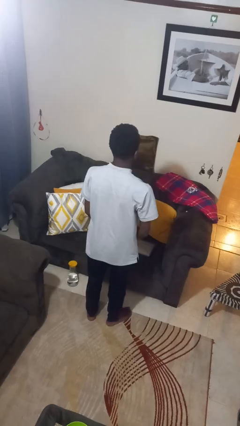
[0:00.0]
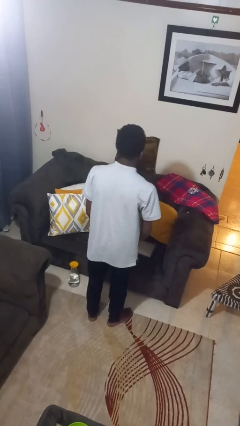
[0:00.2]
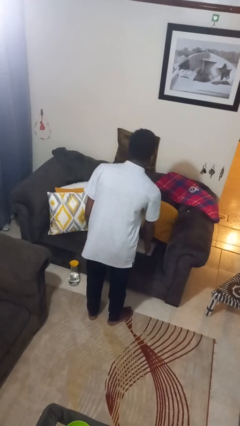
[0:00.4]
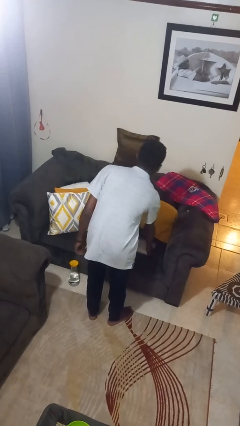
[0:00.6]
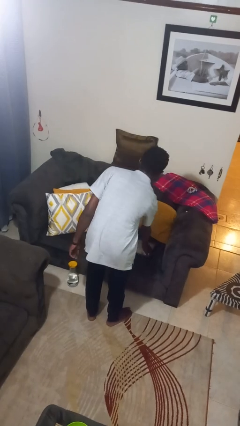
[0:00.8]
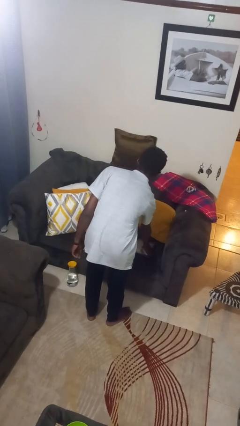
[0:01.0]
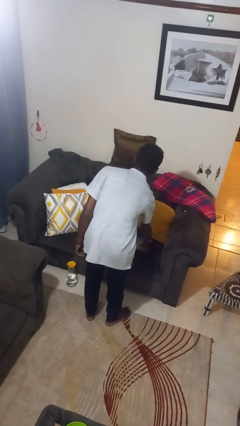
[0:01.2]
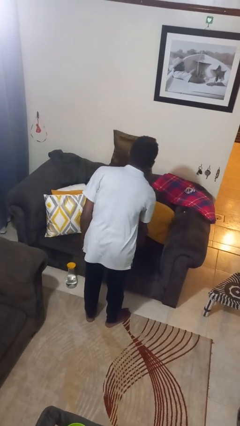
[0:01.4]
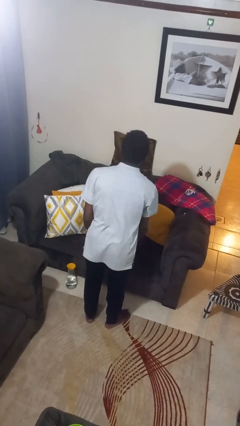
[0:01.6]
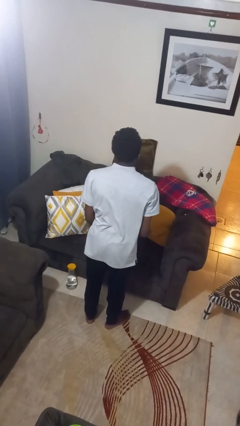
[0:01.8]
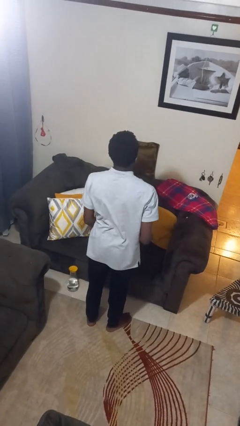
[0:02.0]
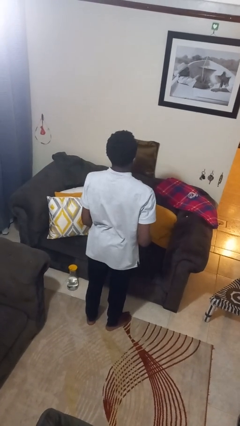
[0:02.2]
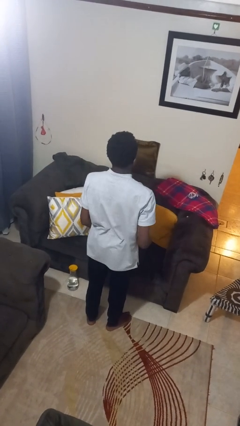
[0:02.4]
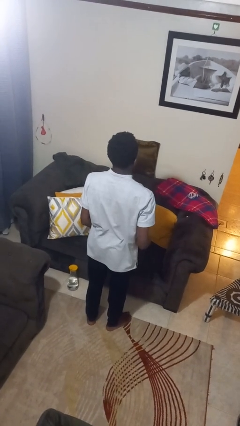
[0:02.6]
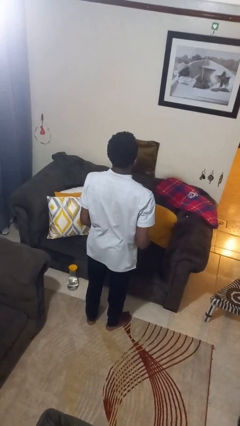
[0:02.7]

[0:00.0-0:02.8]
person picks up object from couch

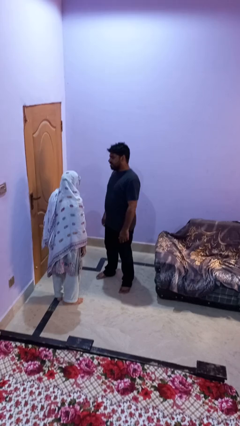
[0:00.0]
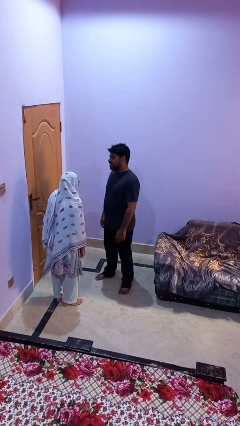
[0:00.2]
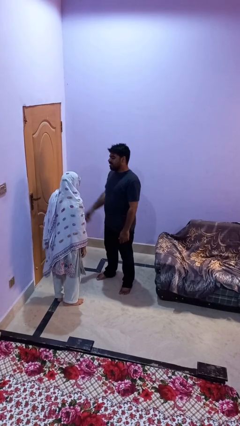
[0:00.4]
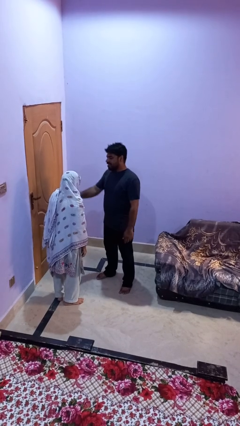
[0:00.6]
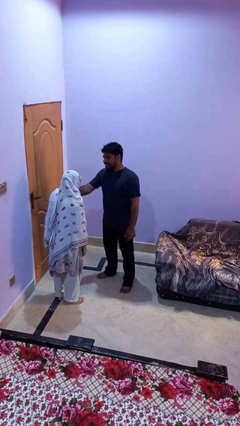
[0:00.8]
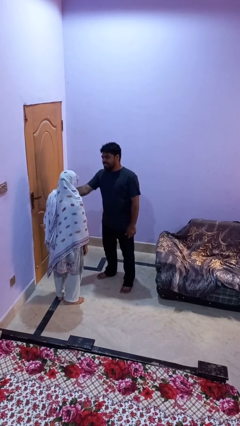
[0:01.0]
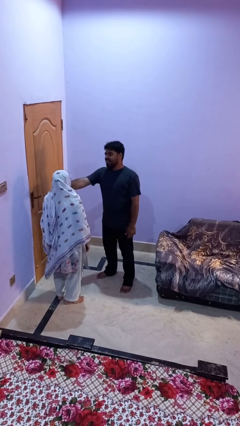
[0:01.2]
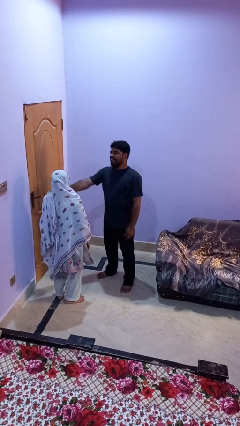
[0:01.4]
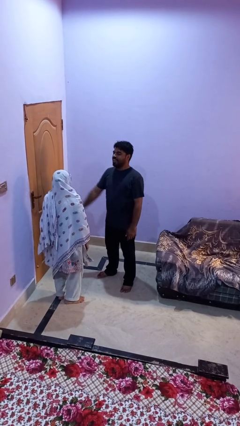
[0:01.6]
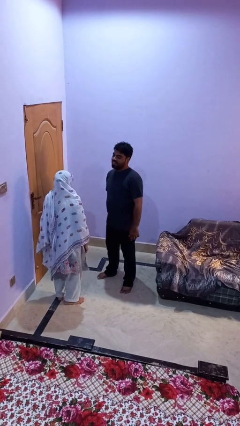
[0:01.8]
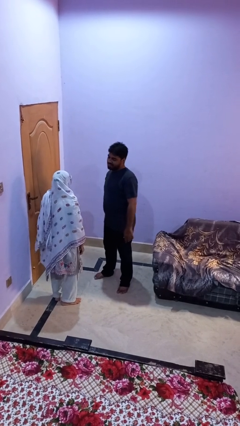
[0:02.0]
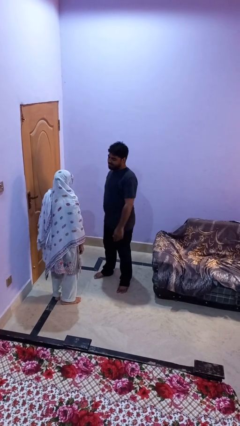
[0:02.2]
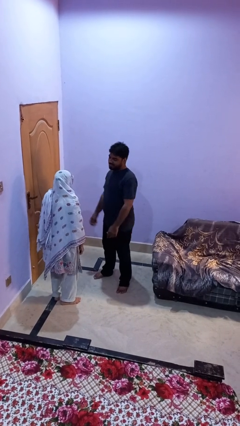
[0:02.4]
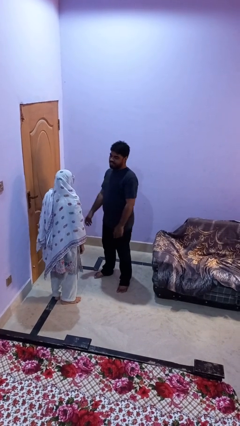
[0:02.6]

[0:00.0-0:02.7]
person shoves person

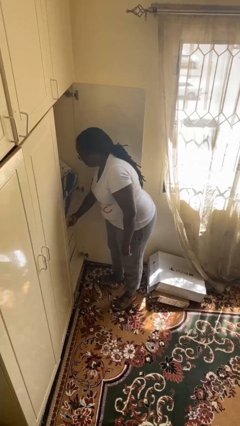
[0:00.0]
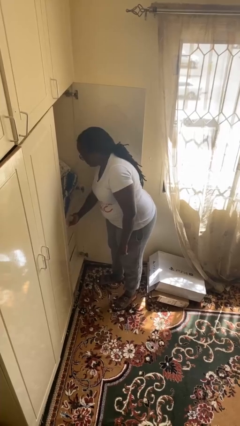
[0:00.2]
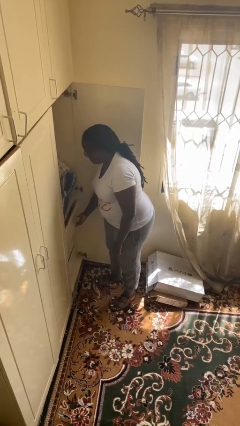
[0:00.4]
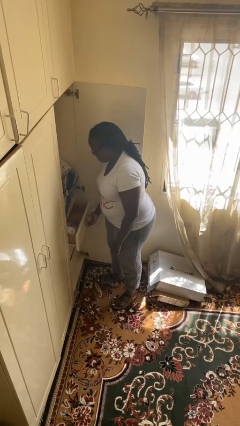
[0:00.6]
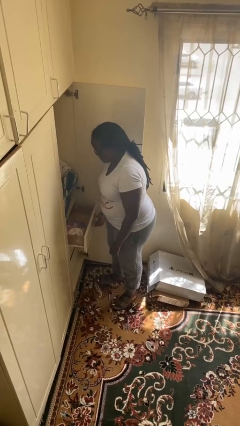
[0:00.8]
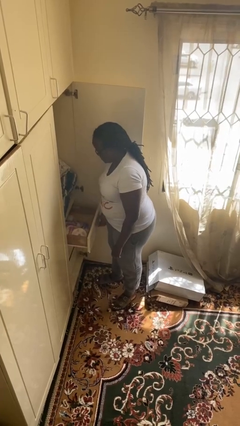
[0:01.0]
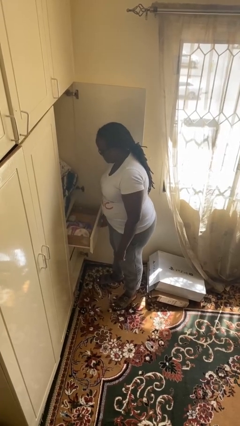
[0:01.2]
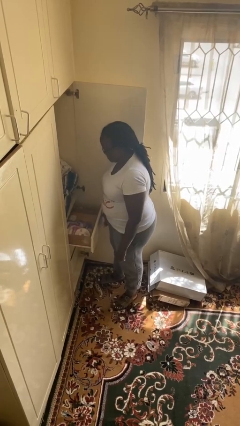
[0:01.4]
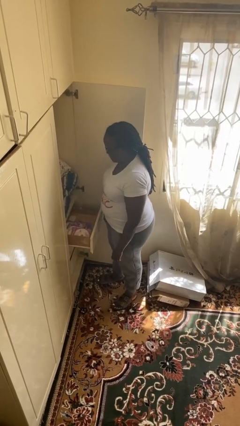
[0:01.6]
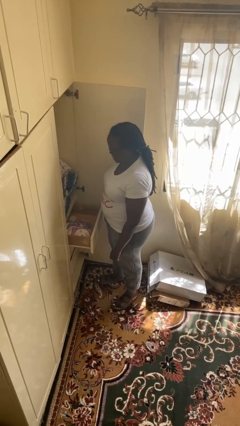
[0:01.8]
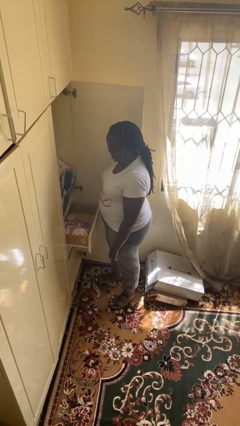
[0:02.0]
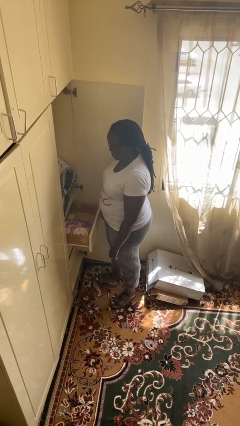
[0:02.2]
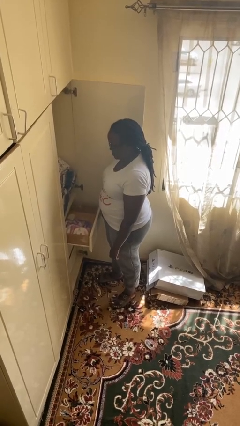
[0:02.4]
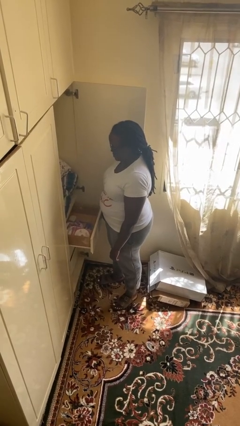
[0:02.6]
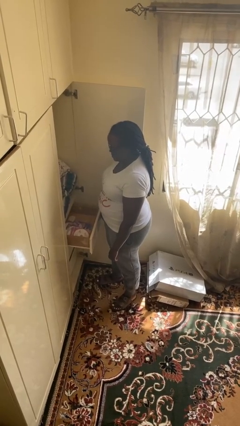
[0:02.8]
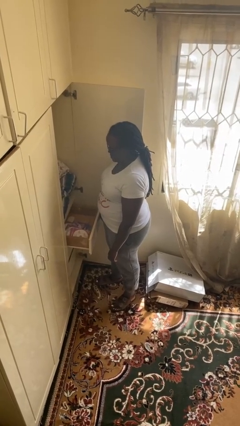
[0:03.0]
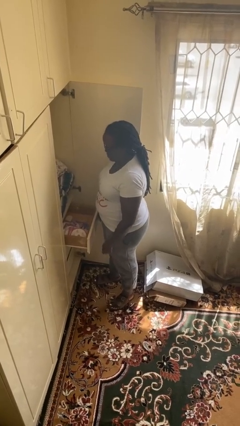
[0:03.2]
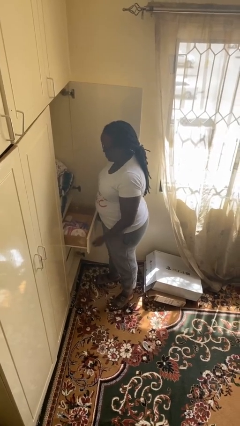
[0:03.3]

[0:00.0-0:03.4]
person opens dresser drawer

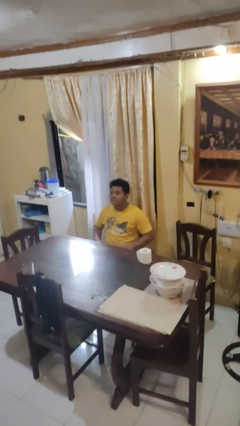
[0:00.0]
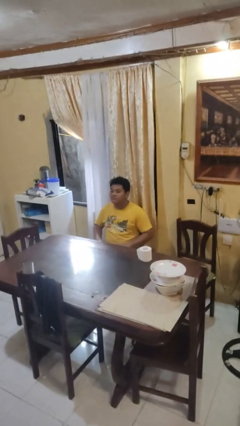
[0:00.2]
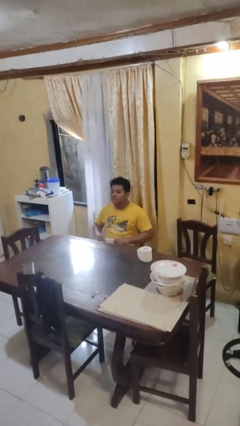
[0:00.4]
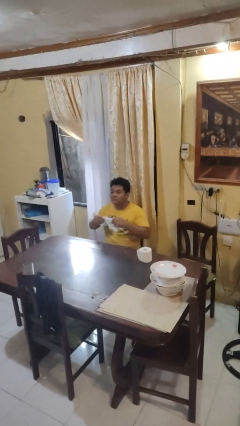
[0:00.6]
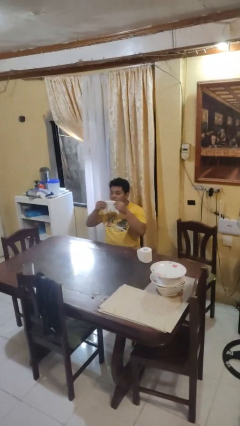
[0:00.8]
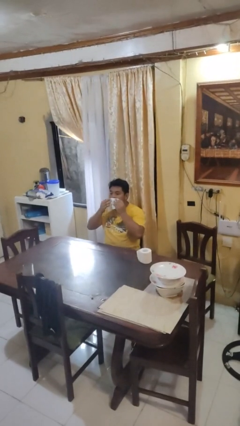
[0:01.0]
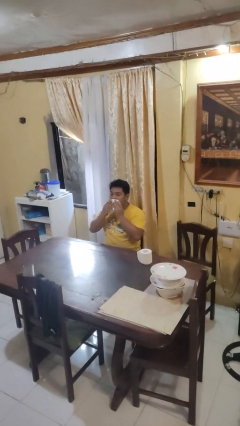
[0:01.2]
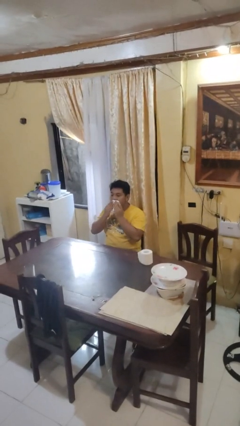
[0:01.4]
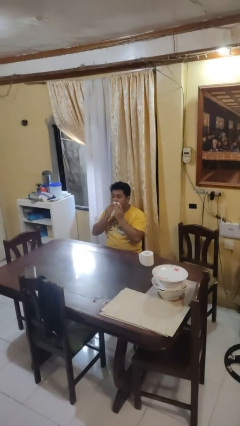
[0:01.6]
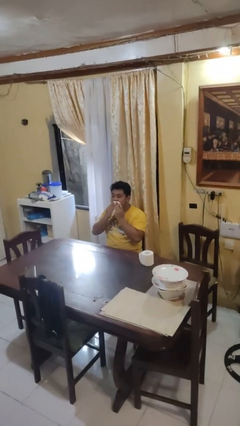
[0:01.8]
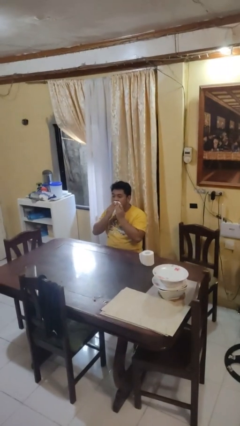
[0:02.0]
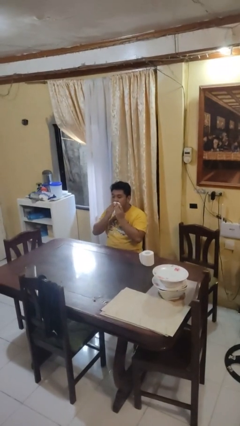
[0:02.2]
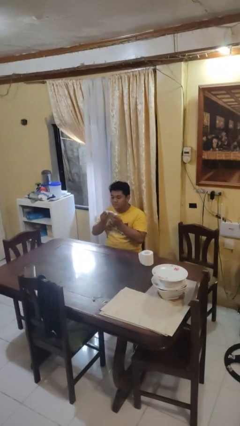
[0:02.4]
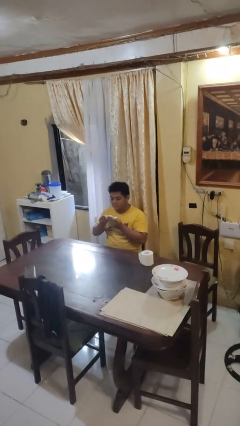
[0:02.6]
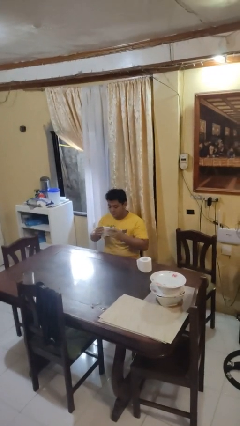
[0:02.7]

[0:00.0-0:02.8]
person wipes mouth with napkin

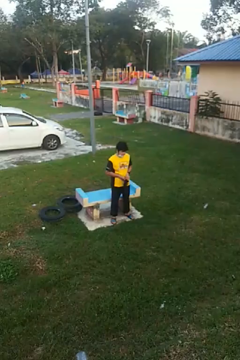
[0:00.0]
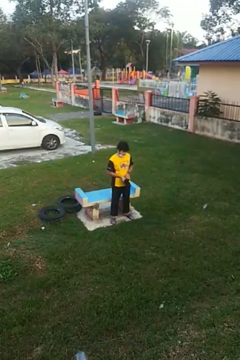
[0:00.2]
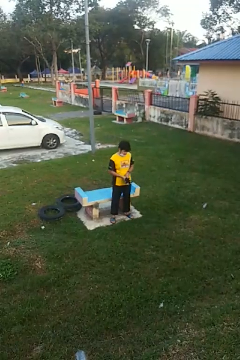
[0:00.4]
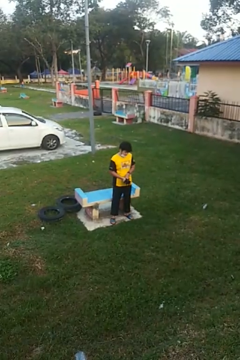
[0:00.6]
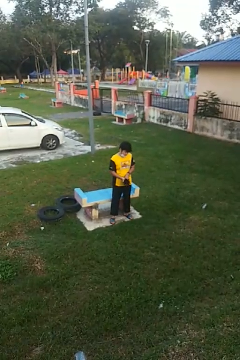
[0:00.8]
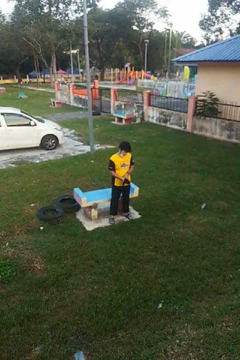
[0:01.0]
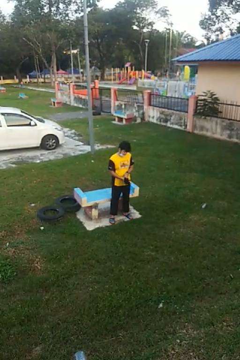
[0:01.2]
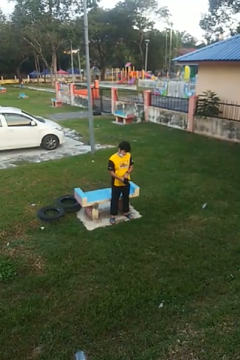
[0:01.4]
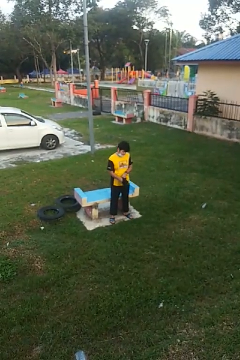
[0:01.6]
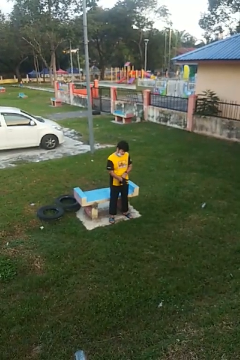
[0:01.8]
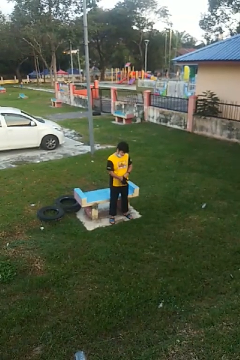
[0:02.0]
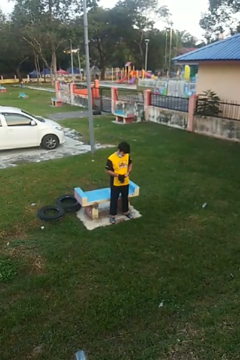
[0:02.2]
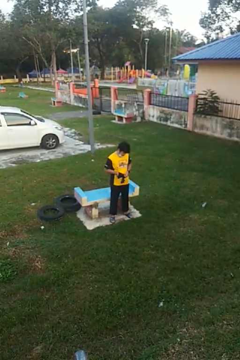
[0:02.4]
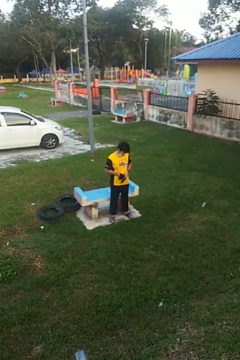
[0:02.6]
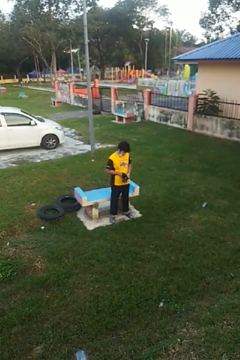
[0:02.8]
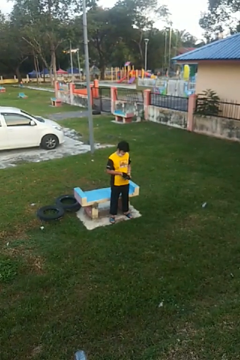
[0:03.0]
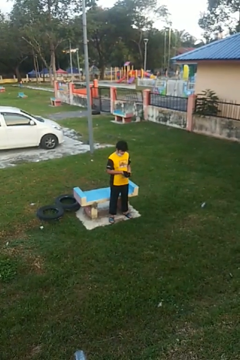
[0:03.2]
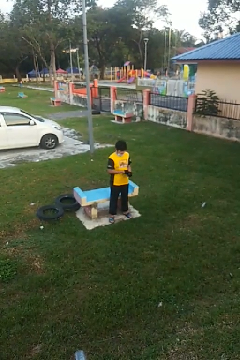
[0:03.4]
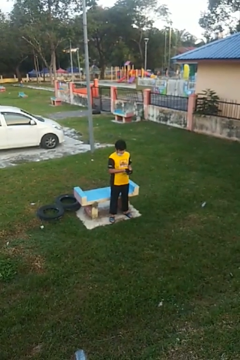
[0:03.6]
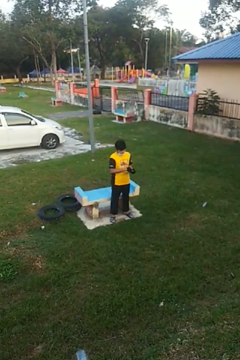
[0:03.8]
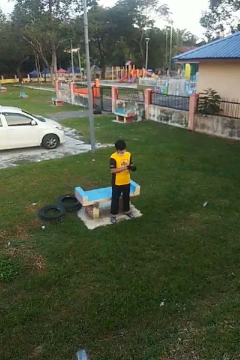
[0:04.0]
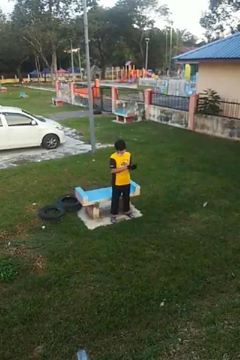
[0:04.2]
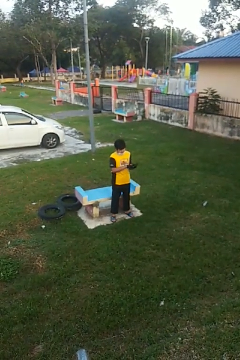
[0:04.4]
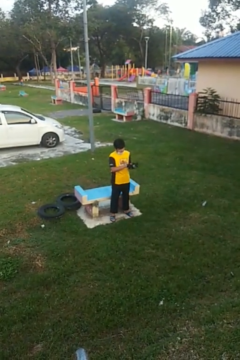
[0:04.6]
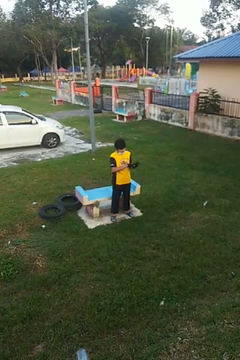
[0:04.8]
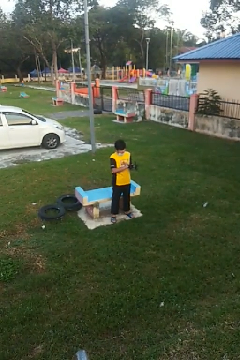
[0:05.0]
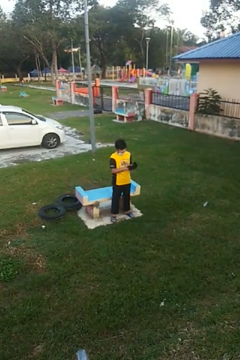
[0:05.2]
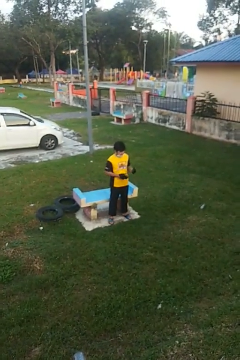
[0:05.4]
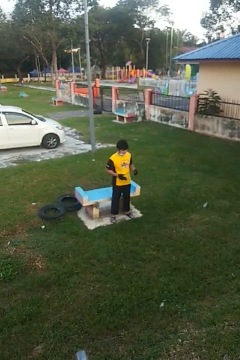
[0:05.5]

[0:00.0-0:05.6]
person puts on gloves

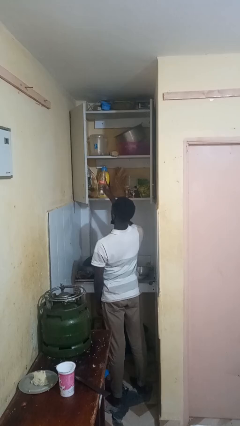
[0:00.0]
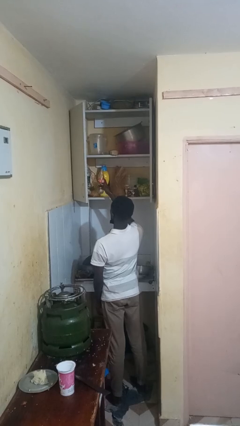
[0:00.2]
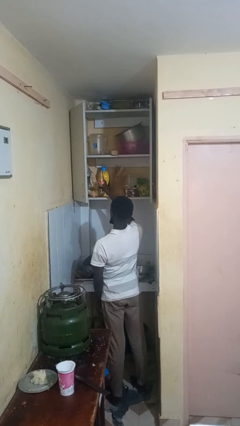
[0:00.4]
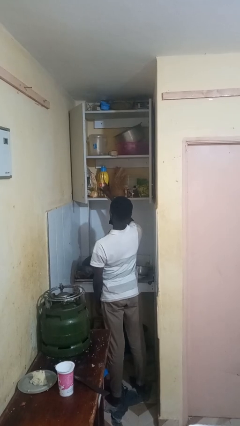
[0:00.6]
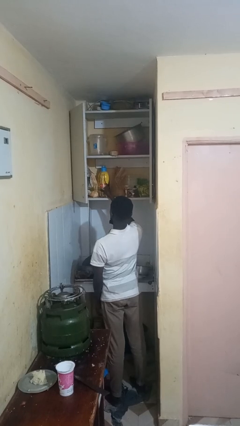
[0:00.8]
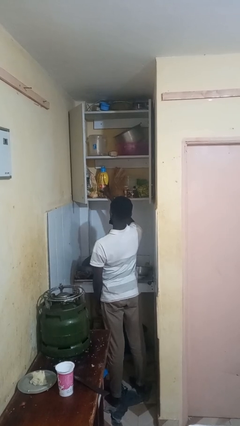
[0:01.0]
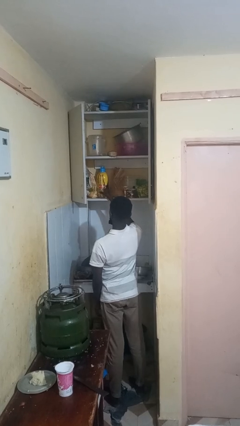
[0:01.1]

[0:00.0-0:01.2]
person puts down object into cabinet
